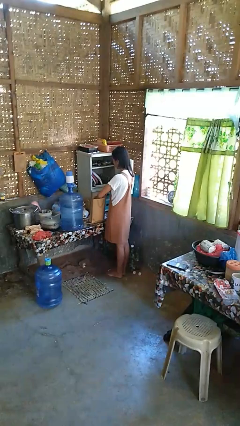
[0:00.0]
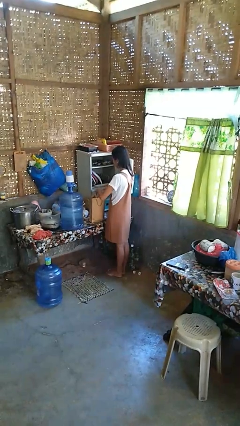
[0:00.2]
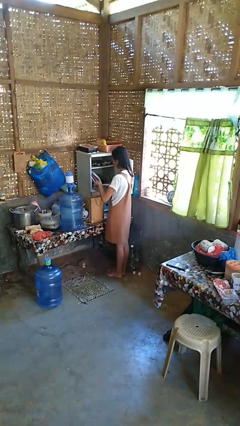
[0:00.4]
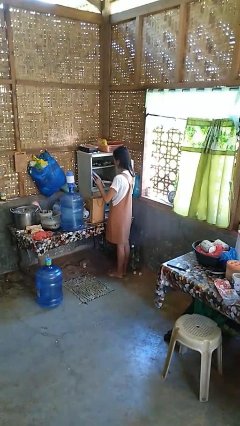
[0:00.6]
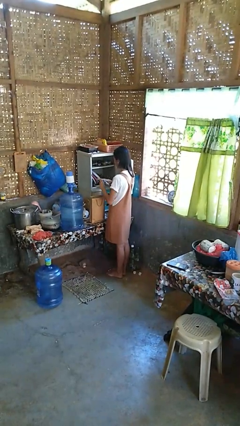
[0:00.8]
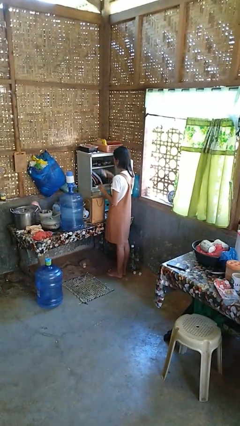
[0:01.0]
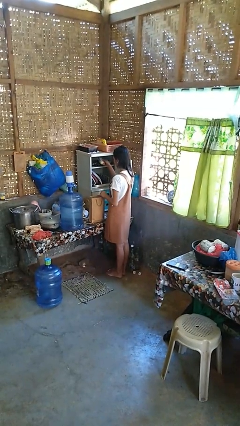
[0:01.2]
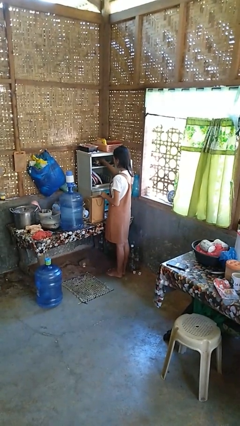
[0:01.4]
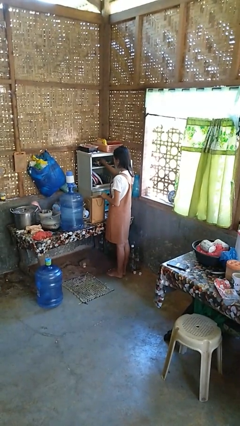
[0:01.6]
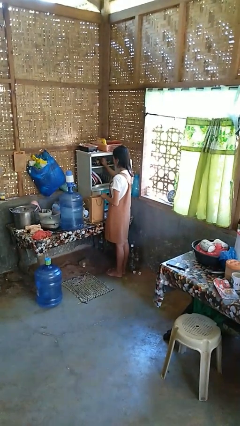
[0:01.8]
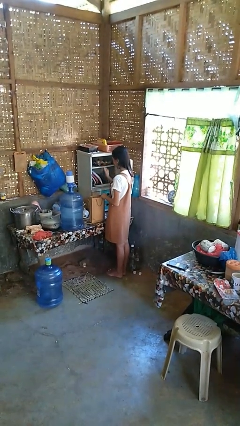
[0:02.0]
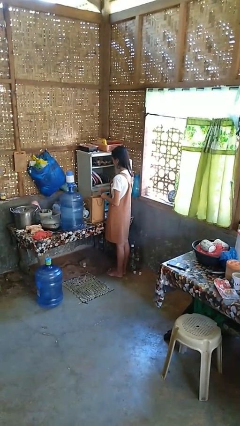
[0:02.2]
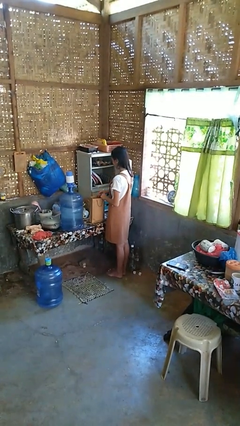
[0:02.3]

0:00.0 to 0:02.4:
person loads groceries into cabinet

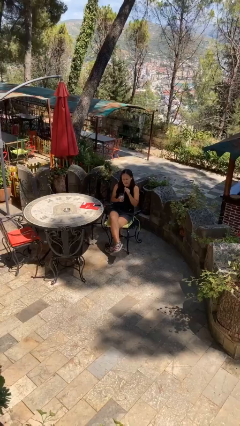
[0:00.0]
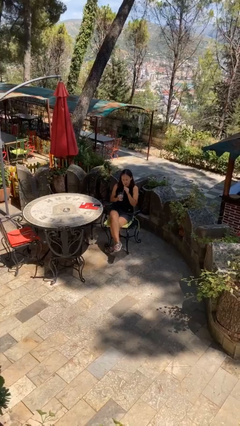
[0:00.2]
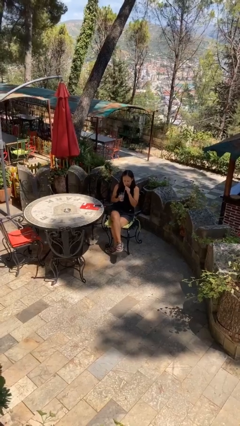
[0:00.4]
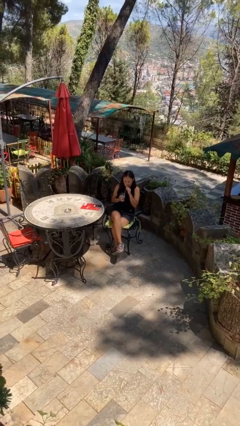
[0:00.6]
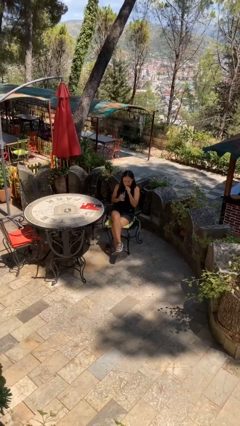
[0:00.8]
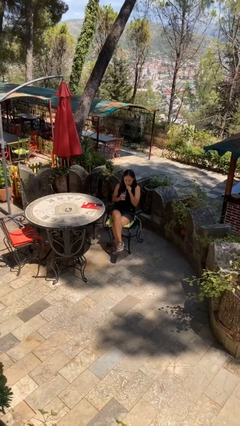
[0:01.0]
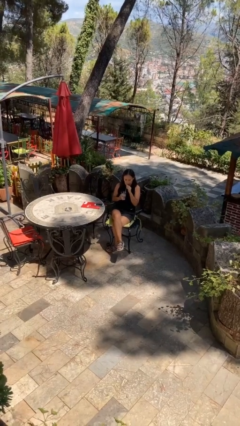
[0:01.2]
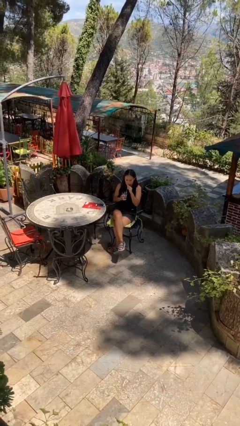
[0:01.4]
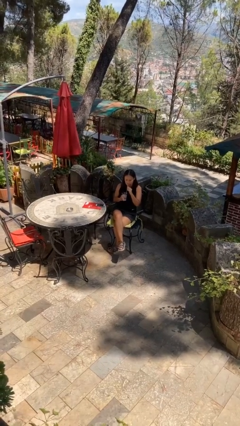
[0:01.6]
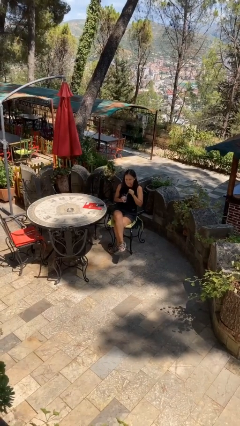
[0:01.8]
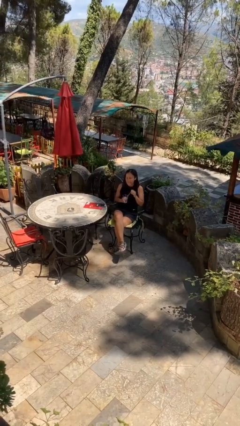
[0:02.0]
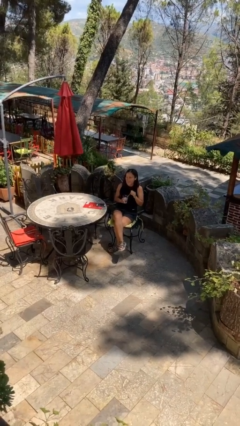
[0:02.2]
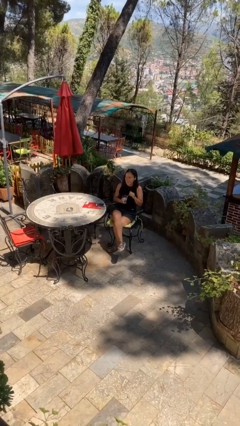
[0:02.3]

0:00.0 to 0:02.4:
person drinks from straw

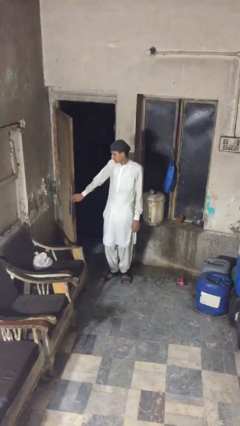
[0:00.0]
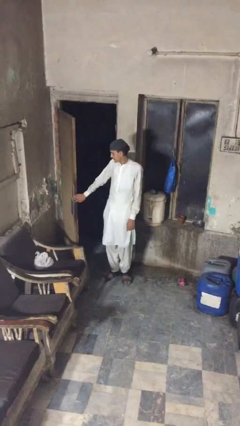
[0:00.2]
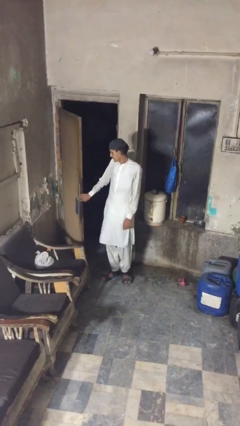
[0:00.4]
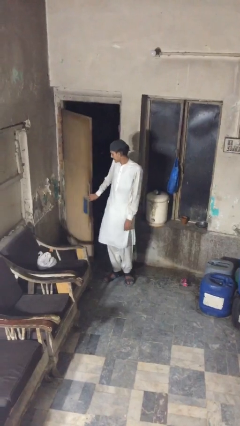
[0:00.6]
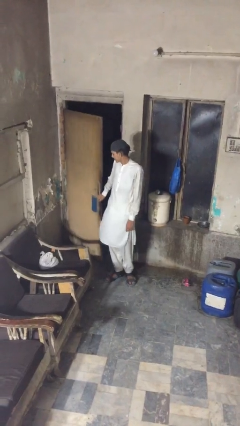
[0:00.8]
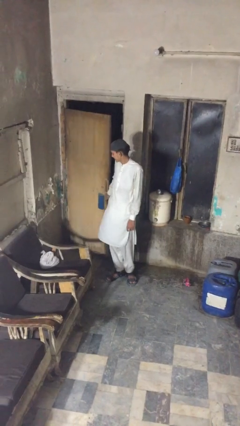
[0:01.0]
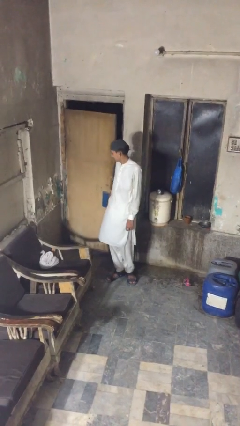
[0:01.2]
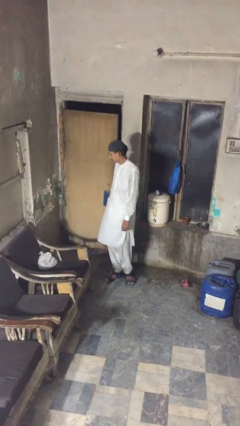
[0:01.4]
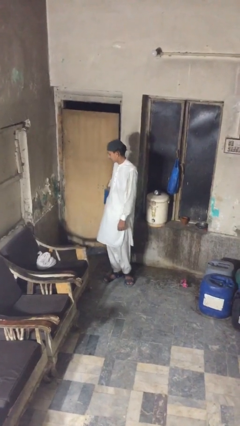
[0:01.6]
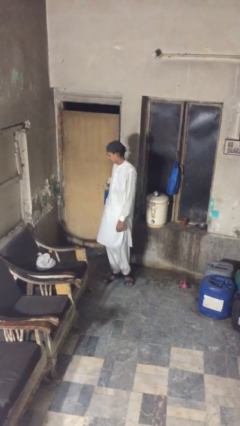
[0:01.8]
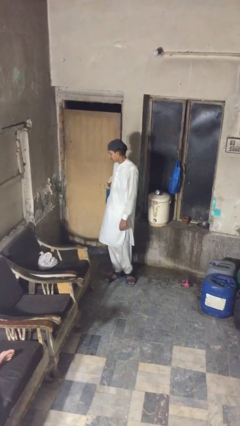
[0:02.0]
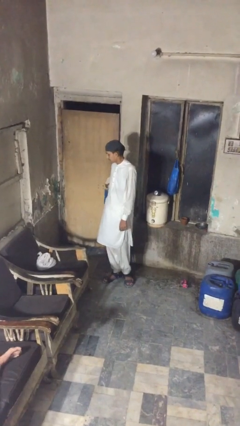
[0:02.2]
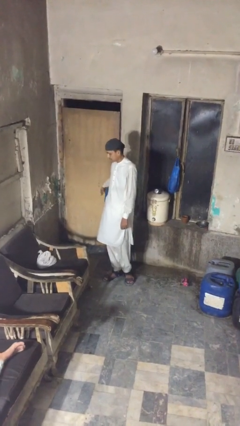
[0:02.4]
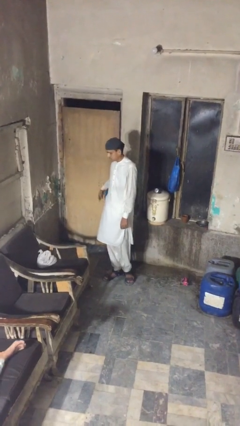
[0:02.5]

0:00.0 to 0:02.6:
person closes facility door

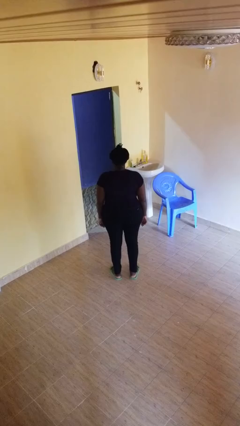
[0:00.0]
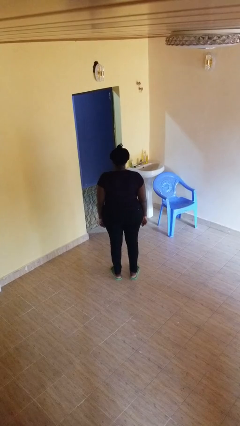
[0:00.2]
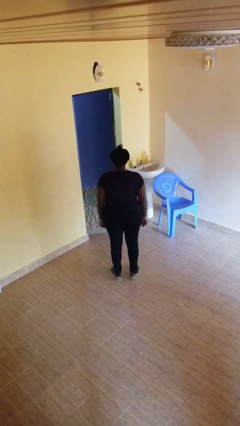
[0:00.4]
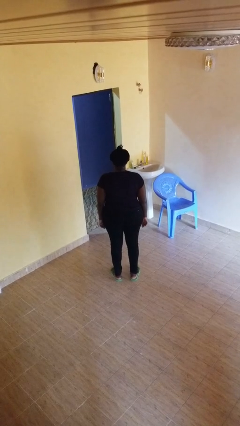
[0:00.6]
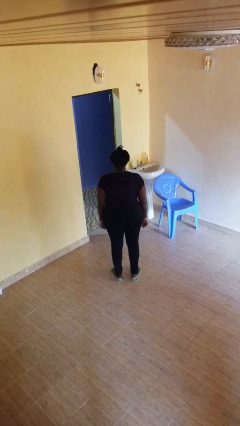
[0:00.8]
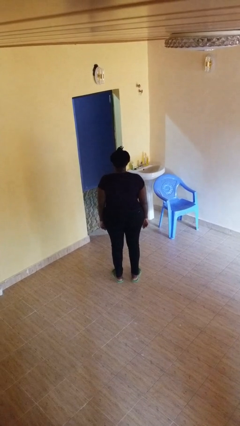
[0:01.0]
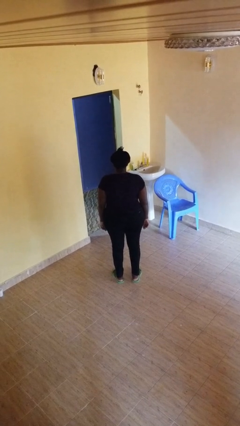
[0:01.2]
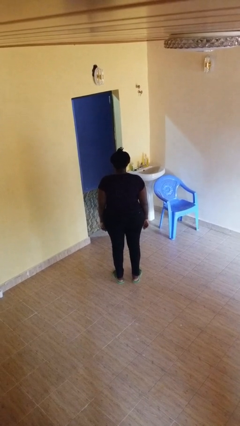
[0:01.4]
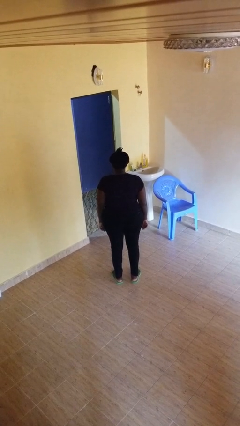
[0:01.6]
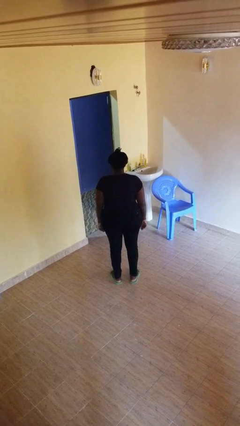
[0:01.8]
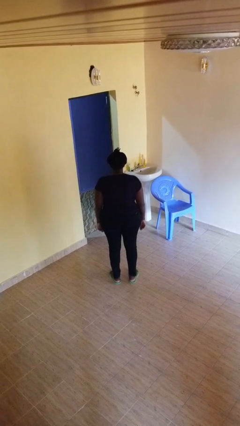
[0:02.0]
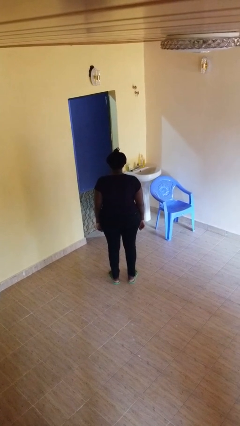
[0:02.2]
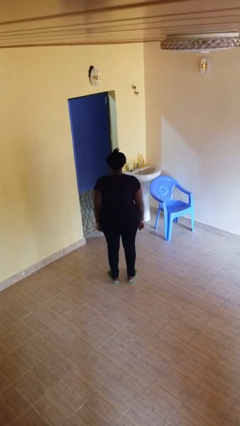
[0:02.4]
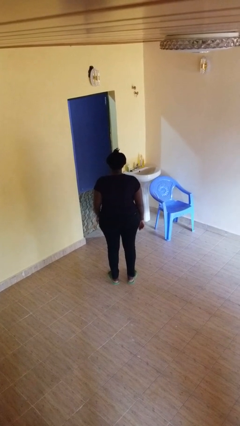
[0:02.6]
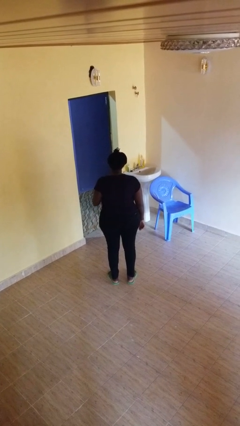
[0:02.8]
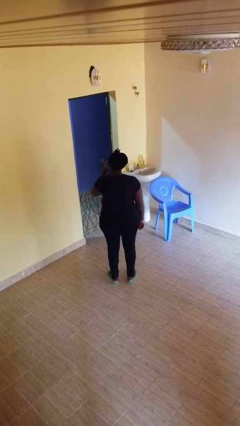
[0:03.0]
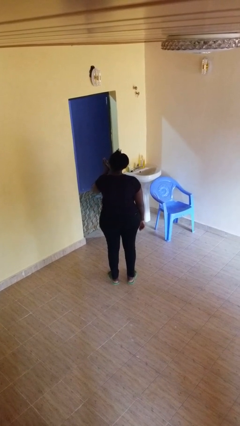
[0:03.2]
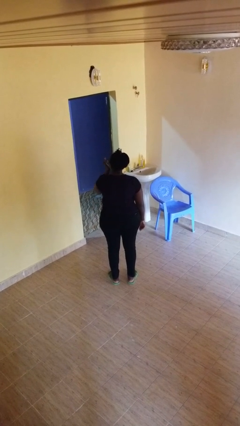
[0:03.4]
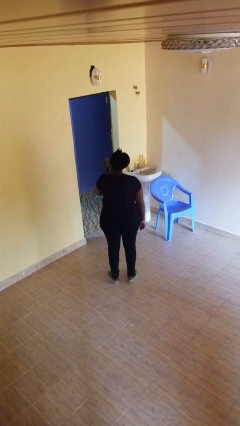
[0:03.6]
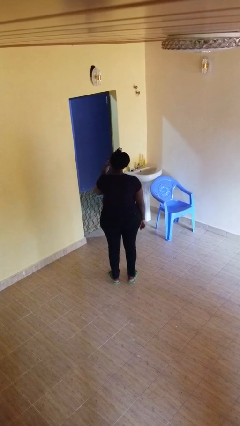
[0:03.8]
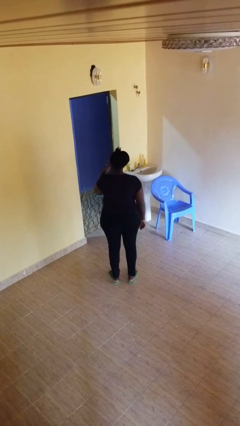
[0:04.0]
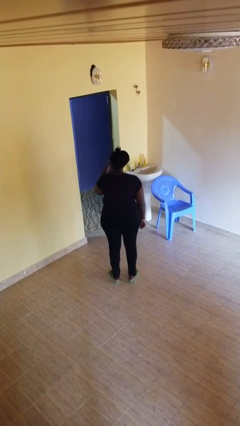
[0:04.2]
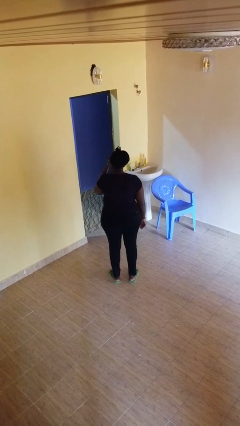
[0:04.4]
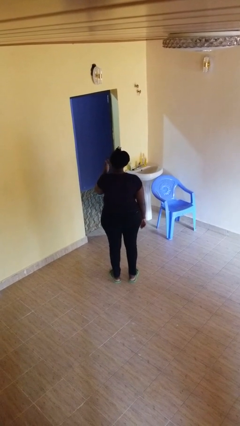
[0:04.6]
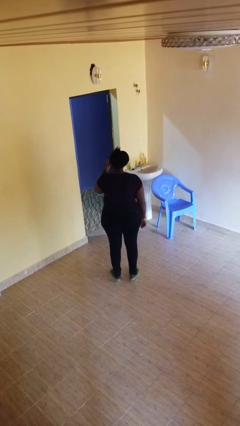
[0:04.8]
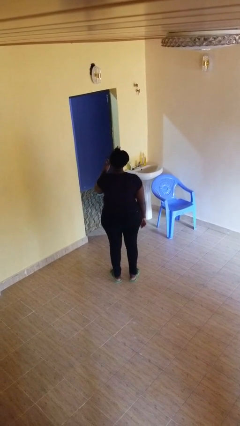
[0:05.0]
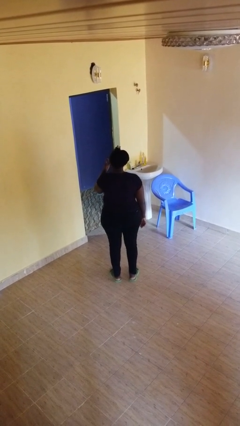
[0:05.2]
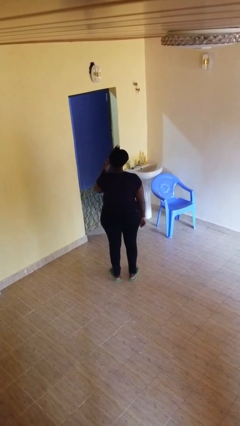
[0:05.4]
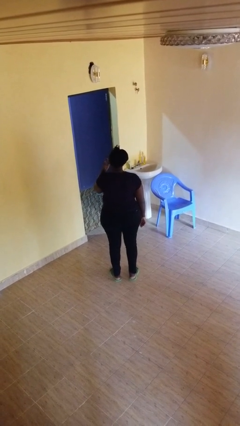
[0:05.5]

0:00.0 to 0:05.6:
person licks fingers

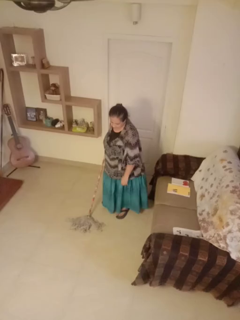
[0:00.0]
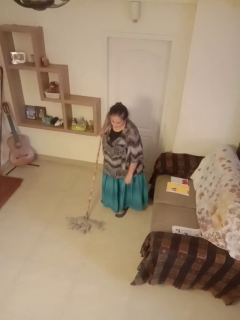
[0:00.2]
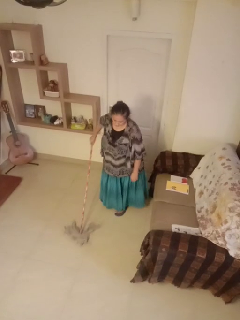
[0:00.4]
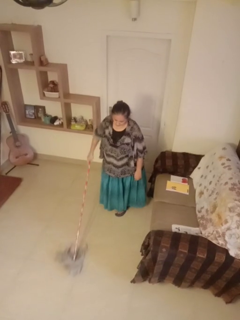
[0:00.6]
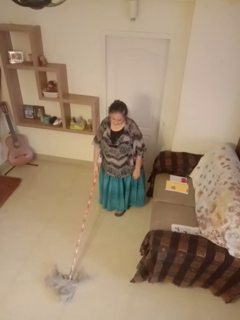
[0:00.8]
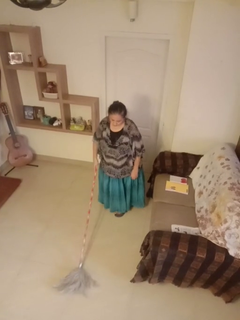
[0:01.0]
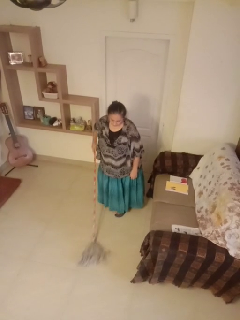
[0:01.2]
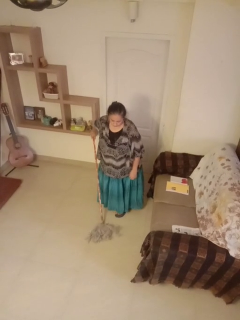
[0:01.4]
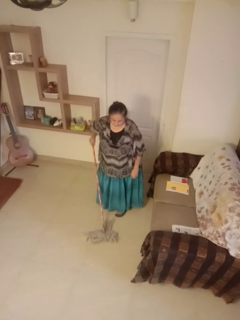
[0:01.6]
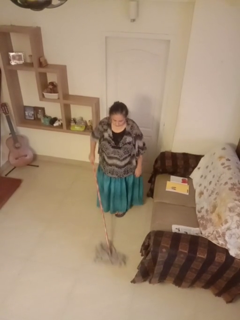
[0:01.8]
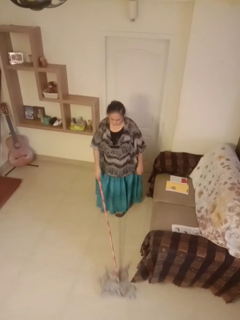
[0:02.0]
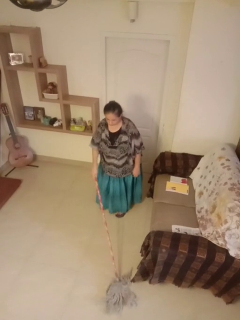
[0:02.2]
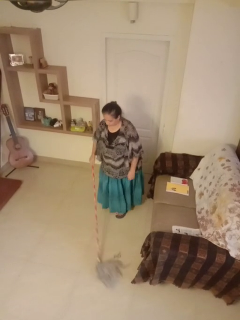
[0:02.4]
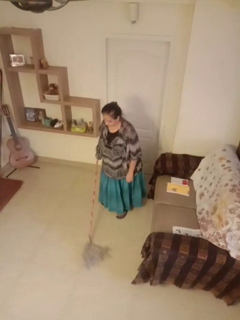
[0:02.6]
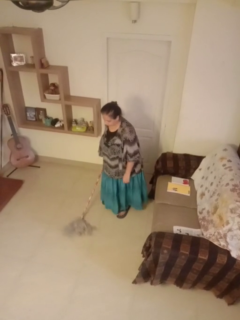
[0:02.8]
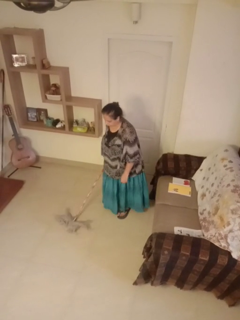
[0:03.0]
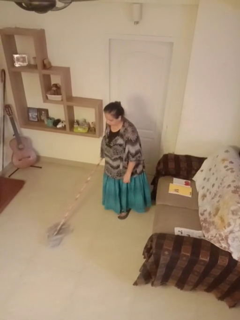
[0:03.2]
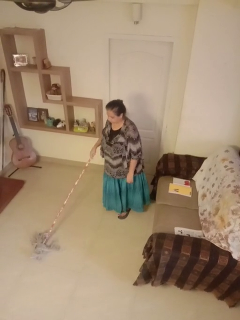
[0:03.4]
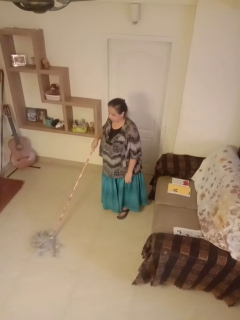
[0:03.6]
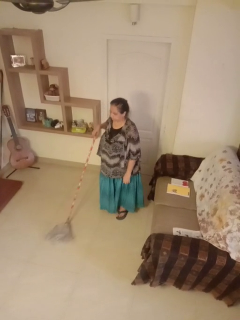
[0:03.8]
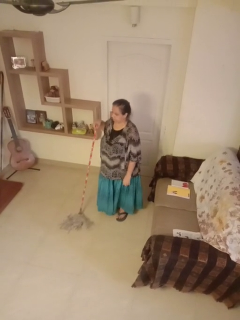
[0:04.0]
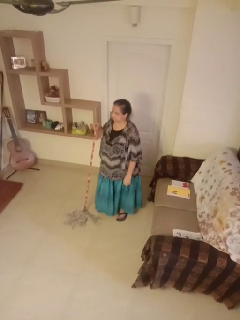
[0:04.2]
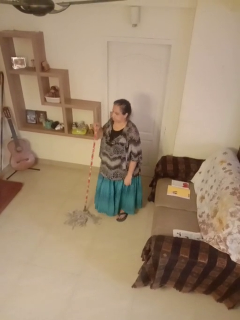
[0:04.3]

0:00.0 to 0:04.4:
person mops

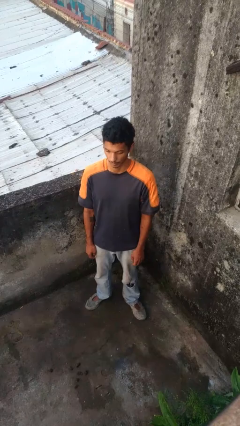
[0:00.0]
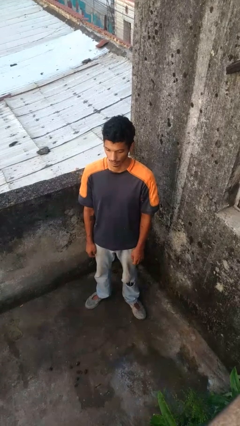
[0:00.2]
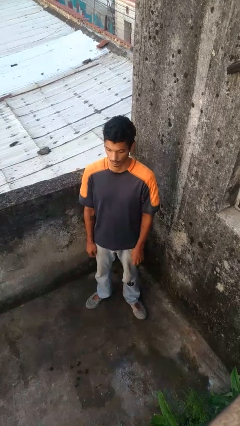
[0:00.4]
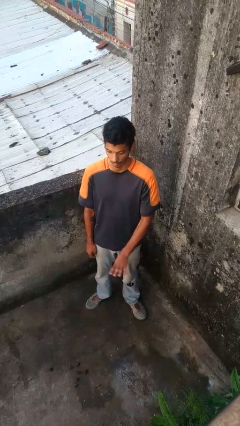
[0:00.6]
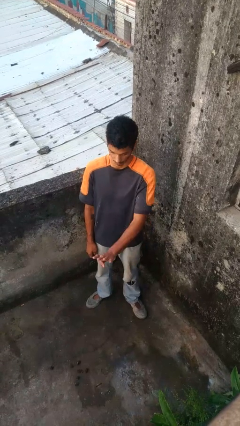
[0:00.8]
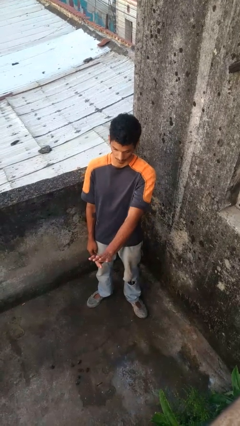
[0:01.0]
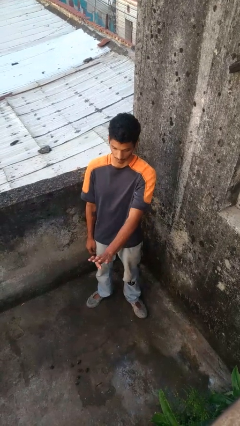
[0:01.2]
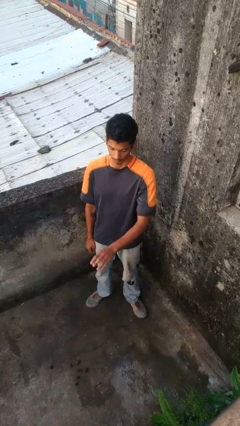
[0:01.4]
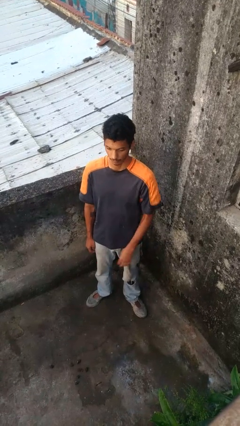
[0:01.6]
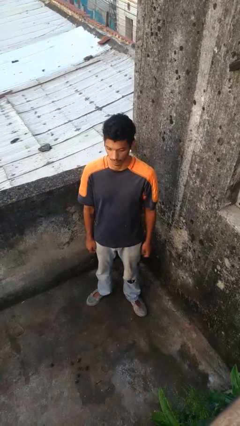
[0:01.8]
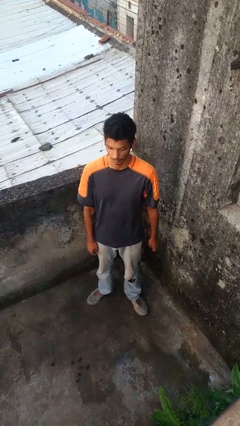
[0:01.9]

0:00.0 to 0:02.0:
person gestures number four
